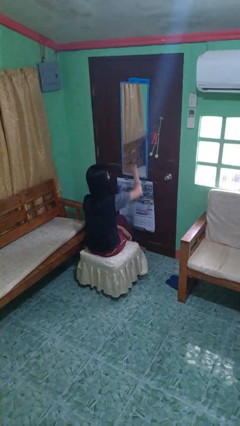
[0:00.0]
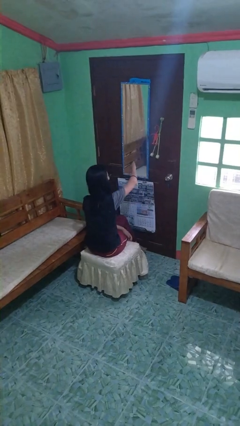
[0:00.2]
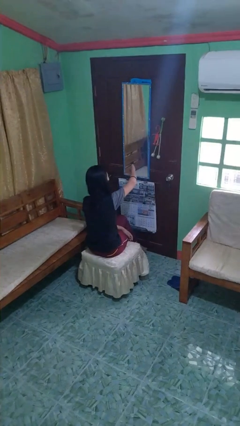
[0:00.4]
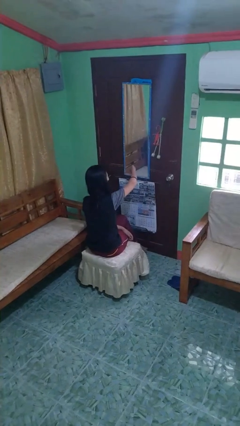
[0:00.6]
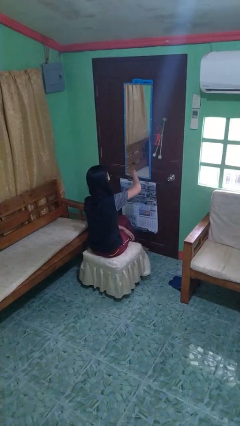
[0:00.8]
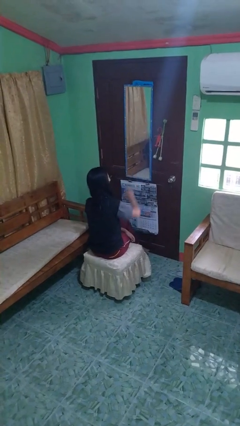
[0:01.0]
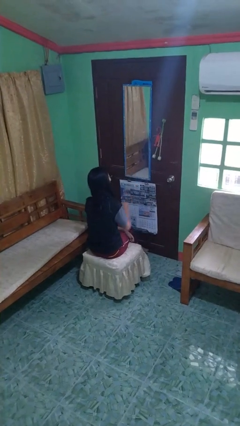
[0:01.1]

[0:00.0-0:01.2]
person gestures thumbs down

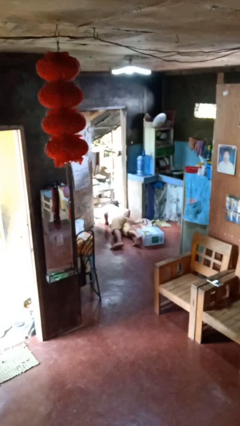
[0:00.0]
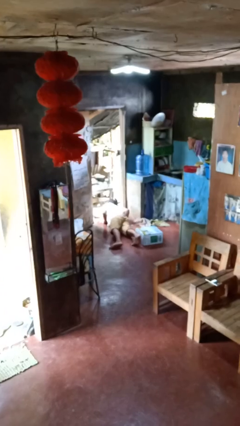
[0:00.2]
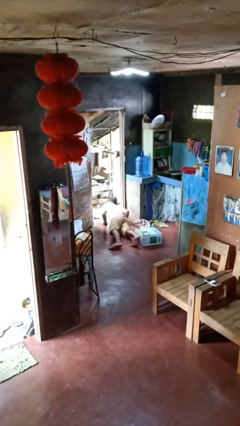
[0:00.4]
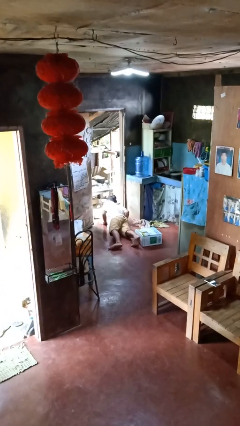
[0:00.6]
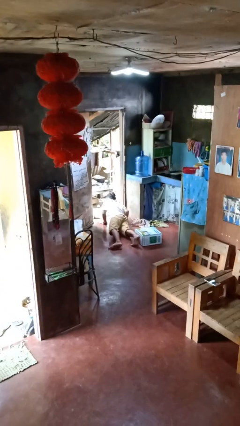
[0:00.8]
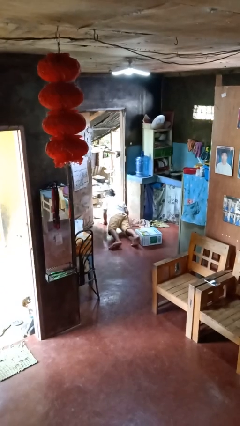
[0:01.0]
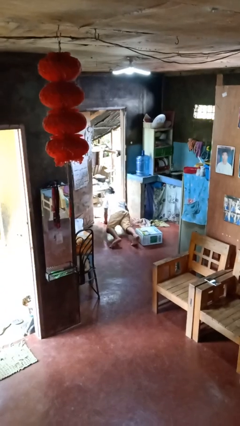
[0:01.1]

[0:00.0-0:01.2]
person lies down on floor

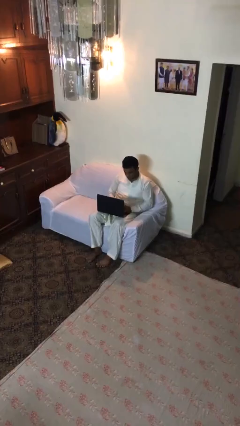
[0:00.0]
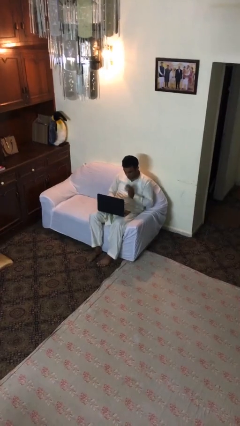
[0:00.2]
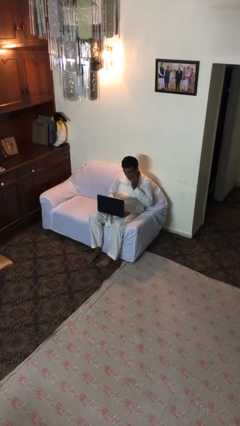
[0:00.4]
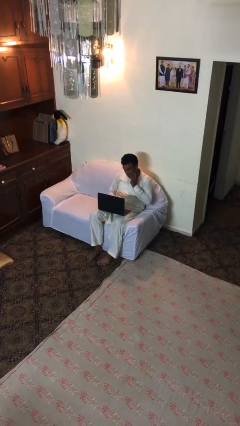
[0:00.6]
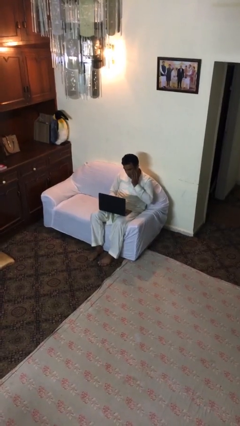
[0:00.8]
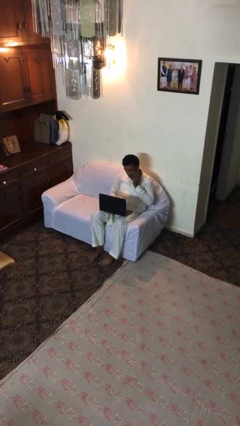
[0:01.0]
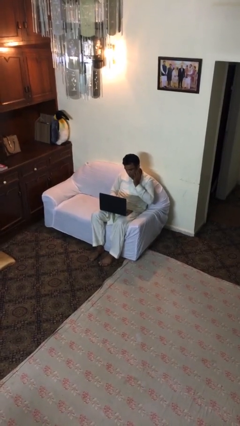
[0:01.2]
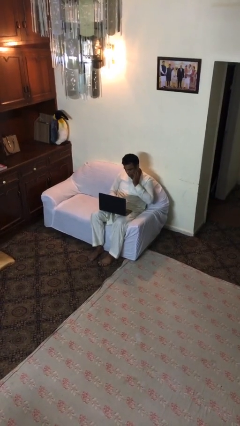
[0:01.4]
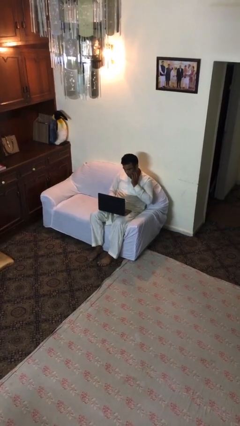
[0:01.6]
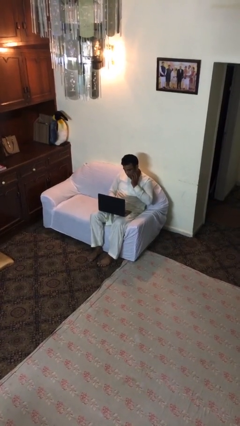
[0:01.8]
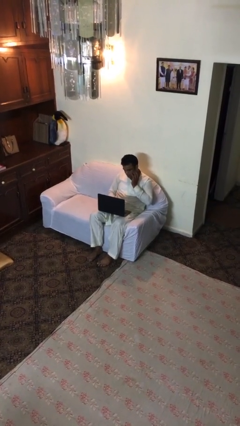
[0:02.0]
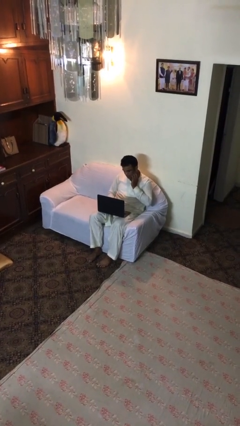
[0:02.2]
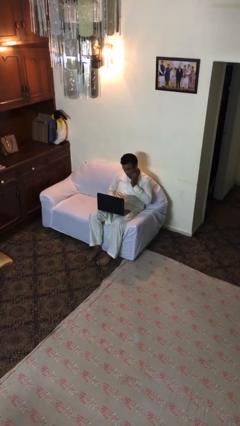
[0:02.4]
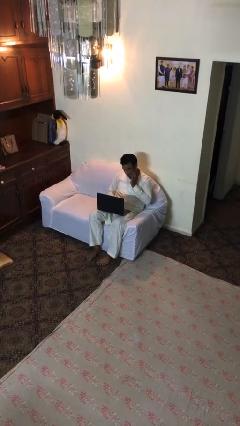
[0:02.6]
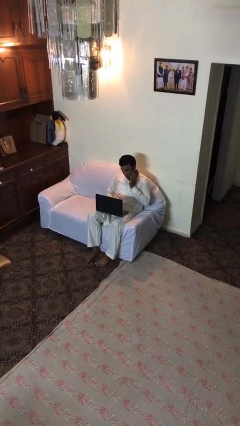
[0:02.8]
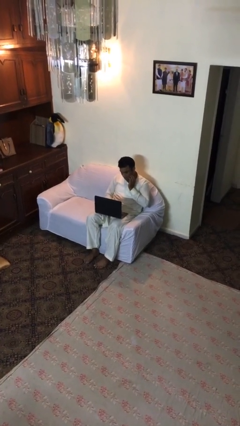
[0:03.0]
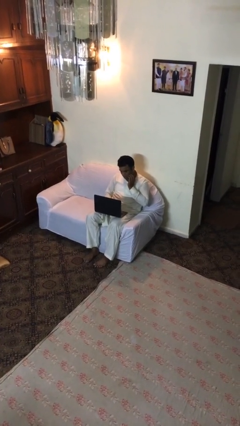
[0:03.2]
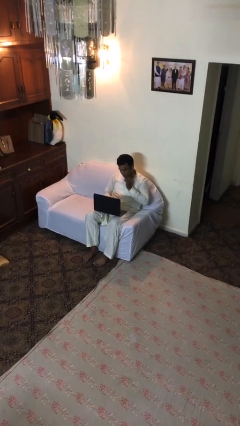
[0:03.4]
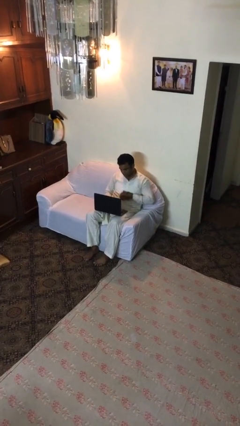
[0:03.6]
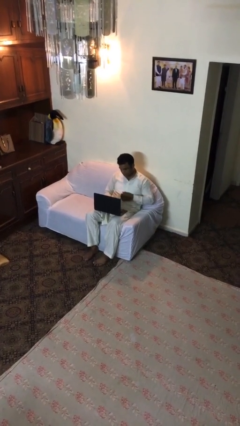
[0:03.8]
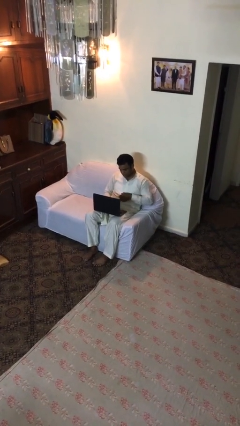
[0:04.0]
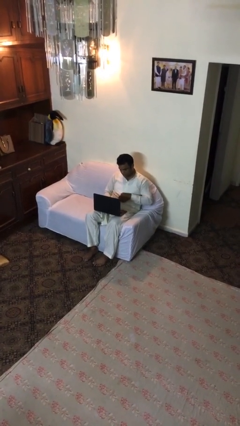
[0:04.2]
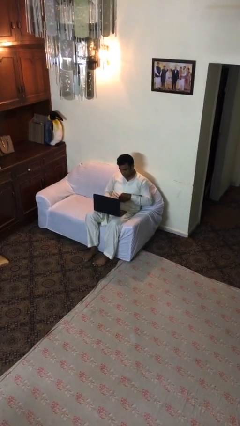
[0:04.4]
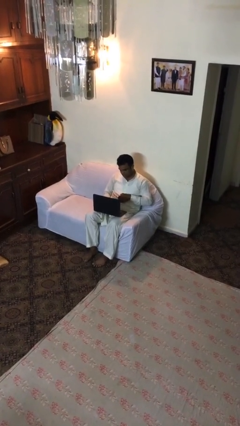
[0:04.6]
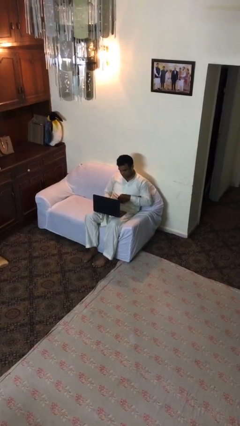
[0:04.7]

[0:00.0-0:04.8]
person interacts with laptop

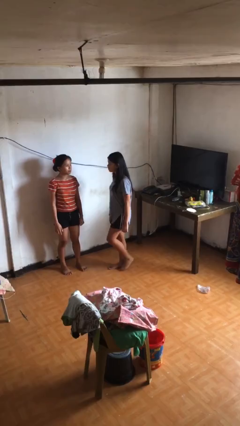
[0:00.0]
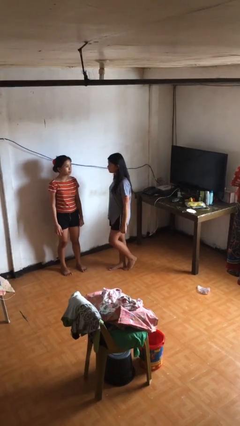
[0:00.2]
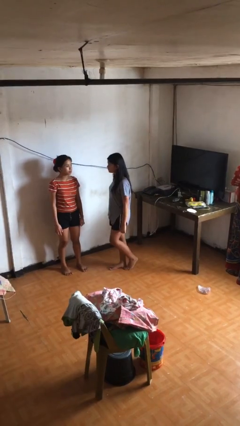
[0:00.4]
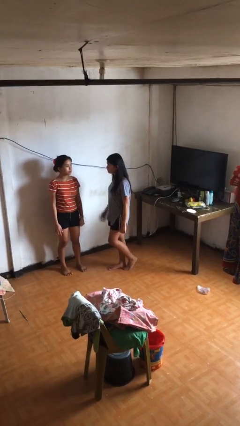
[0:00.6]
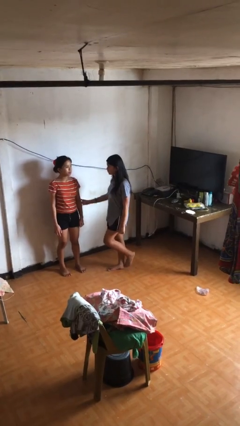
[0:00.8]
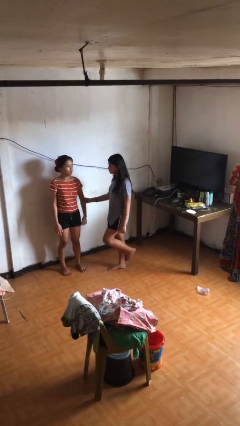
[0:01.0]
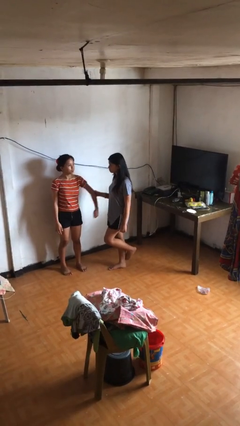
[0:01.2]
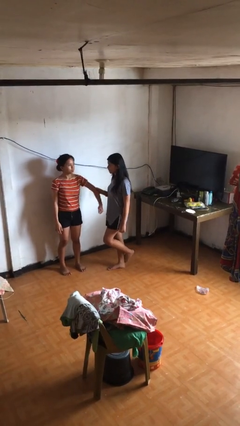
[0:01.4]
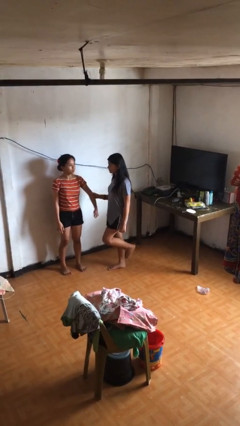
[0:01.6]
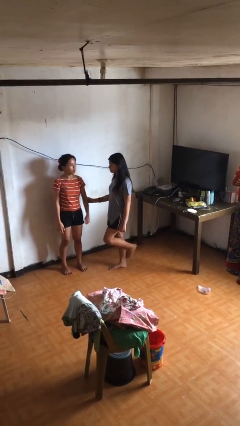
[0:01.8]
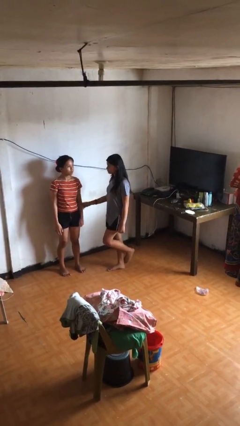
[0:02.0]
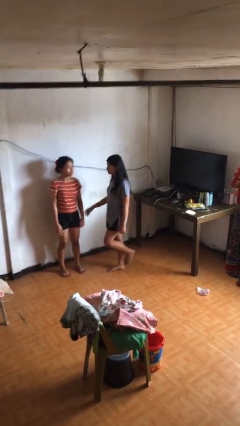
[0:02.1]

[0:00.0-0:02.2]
person grabs person by forearm

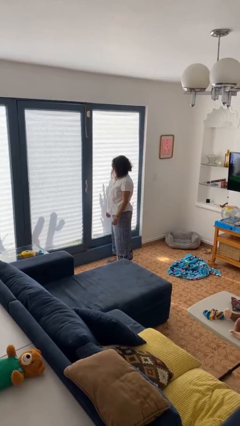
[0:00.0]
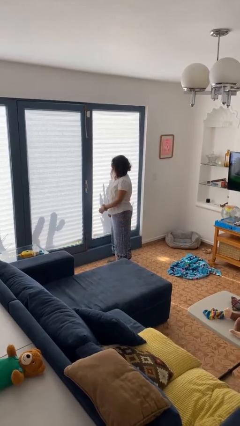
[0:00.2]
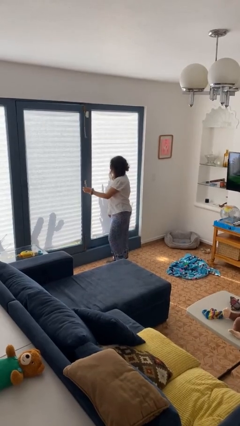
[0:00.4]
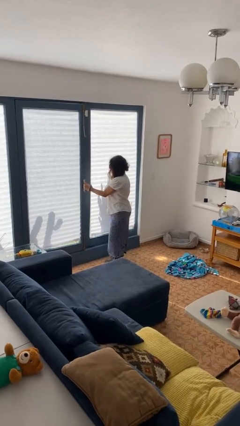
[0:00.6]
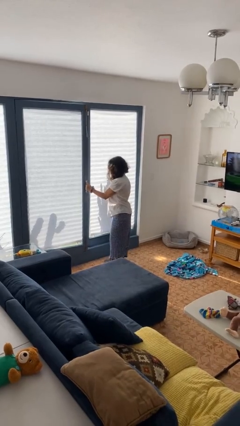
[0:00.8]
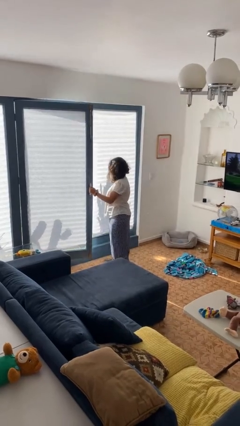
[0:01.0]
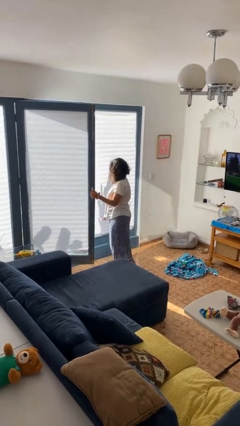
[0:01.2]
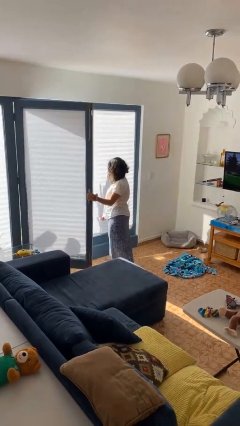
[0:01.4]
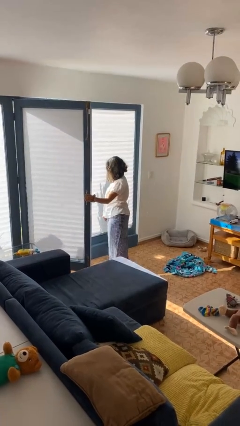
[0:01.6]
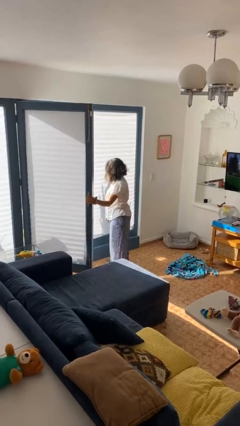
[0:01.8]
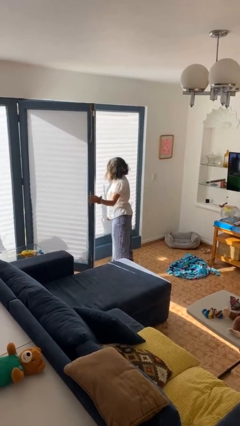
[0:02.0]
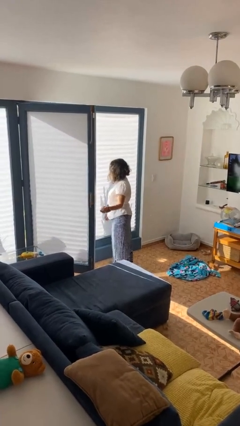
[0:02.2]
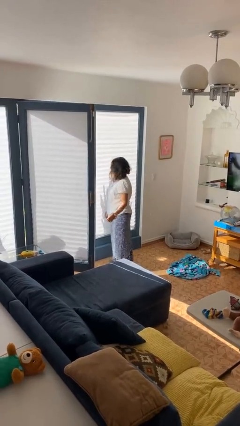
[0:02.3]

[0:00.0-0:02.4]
person opens home window

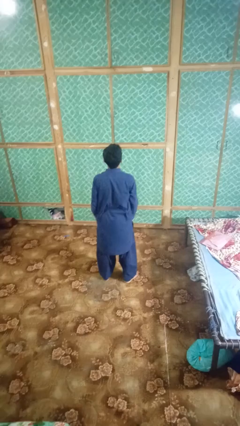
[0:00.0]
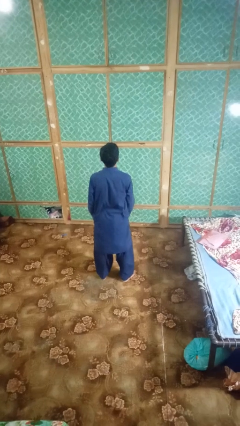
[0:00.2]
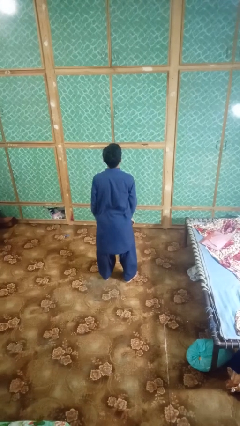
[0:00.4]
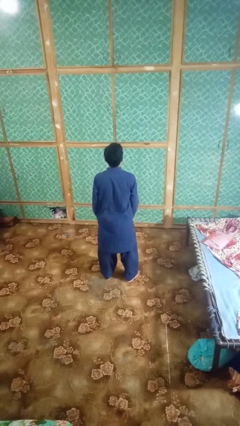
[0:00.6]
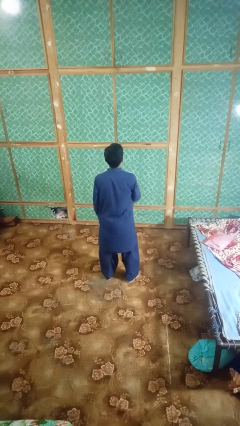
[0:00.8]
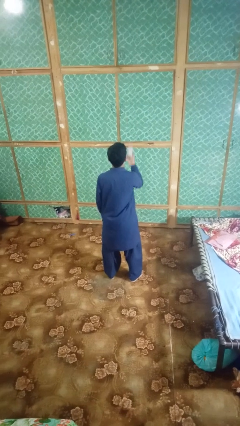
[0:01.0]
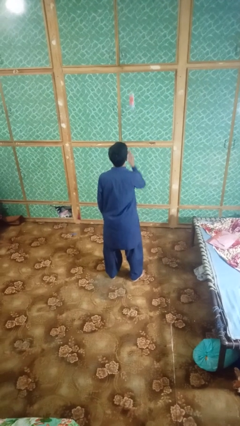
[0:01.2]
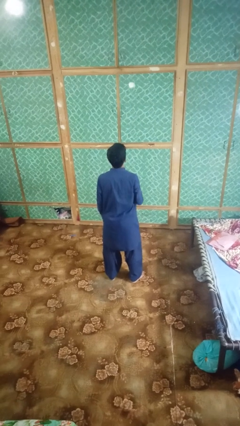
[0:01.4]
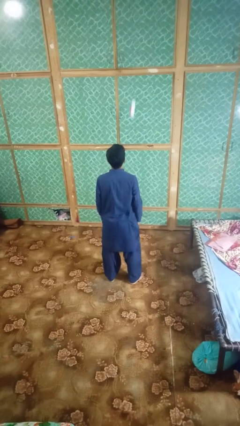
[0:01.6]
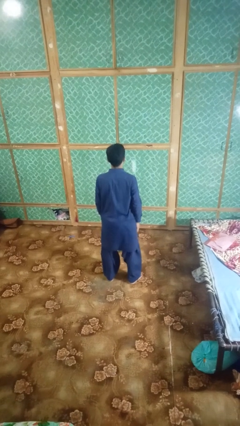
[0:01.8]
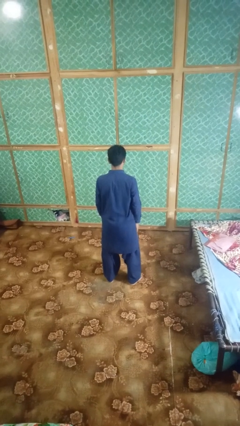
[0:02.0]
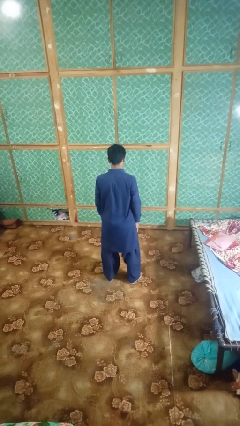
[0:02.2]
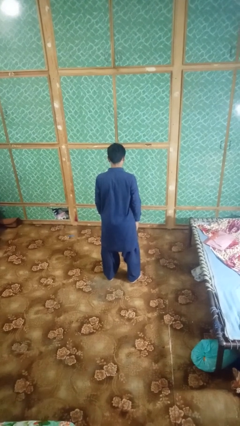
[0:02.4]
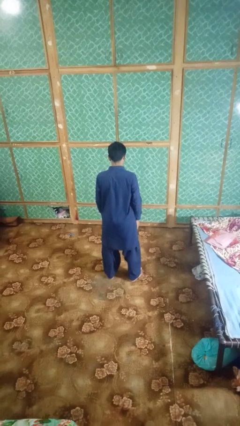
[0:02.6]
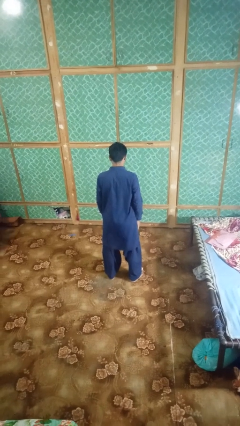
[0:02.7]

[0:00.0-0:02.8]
person throws object into air

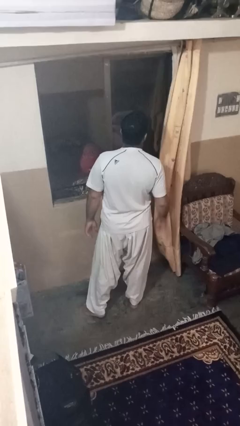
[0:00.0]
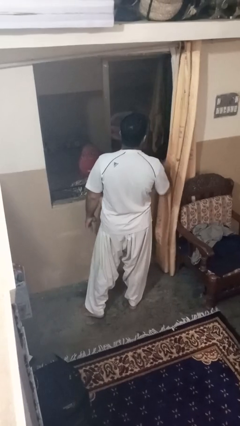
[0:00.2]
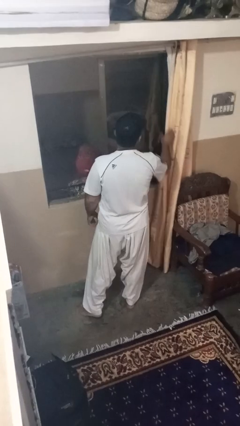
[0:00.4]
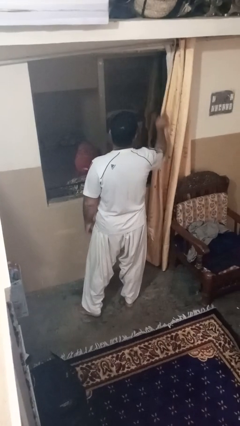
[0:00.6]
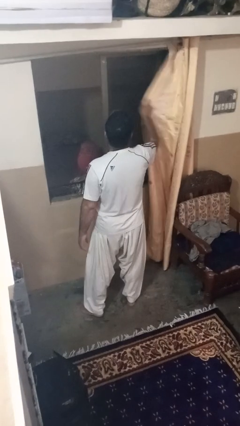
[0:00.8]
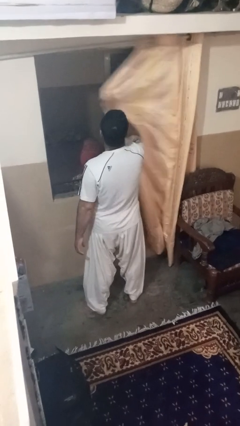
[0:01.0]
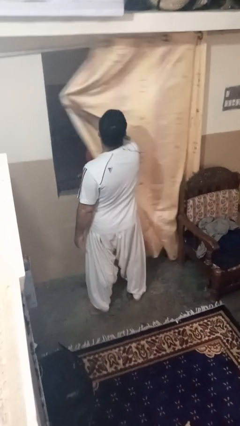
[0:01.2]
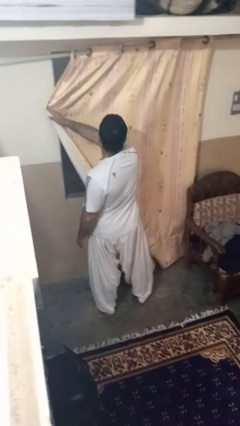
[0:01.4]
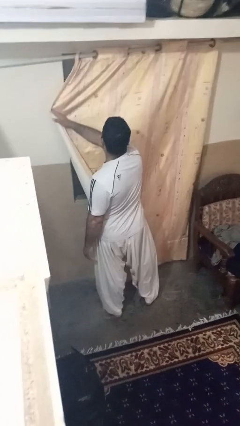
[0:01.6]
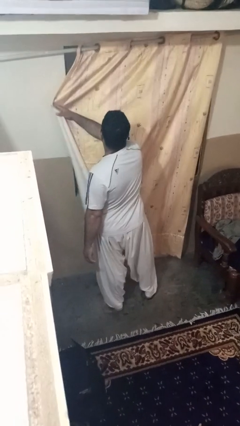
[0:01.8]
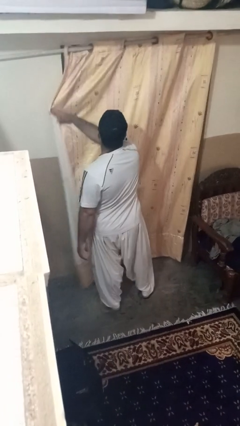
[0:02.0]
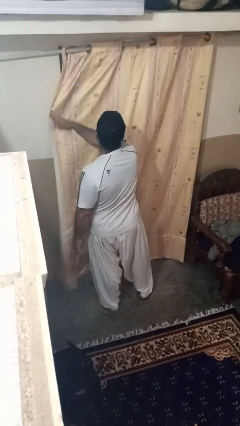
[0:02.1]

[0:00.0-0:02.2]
person closes curtains

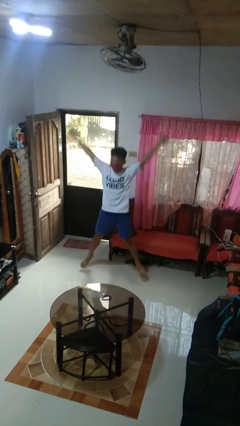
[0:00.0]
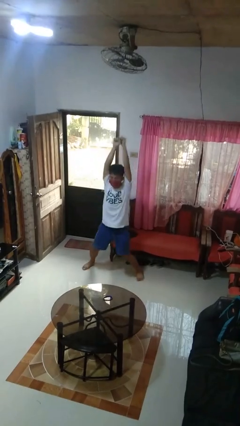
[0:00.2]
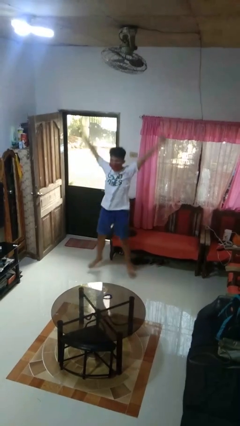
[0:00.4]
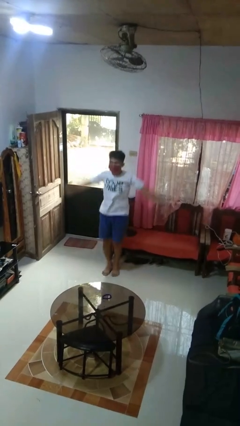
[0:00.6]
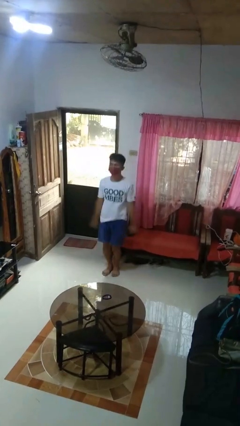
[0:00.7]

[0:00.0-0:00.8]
person exercises with jumping jacks
